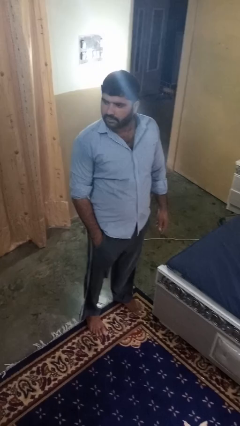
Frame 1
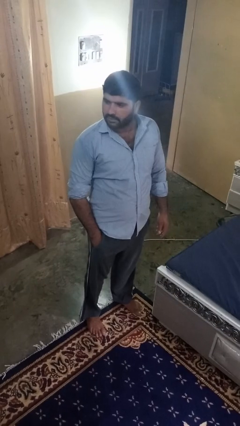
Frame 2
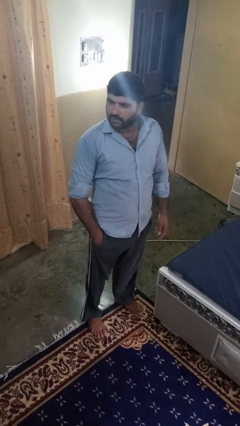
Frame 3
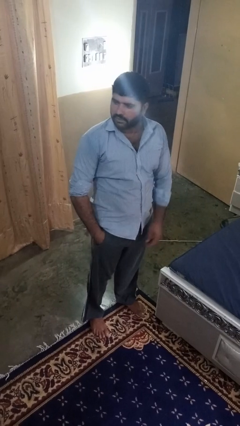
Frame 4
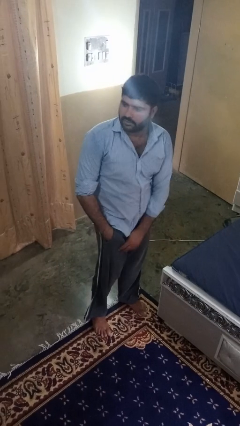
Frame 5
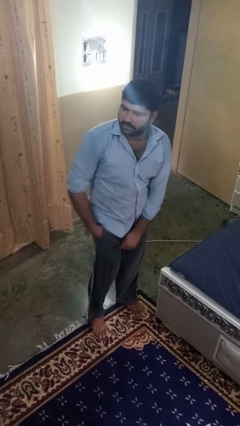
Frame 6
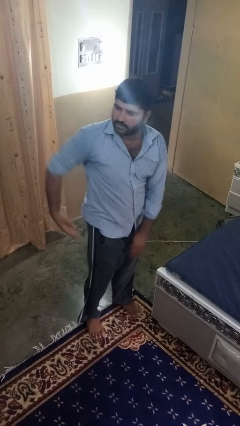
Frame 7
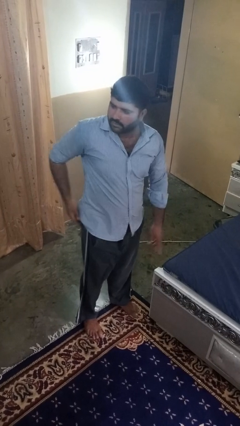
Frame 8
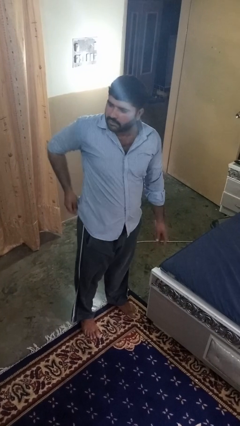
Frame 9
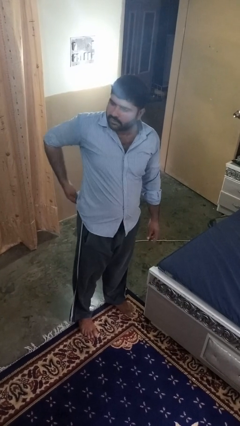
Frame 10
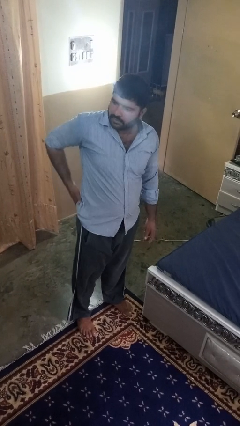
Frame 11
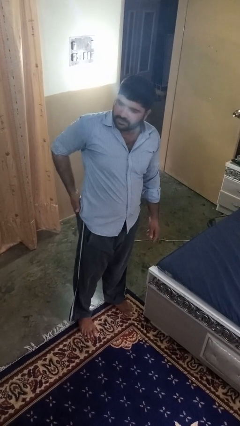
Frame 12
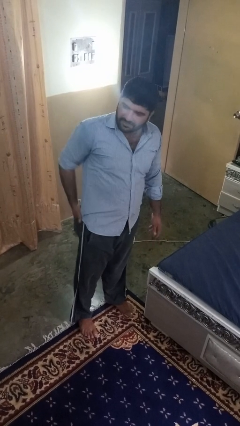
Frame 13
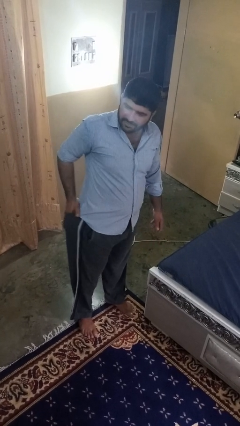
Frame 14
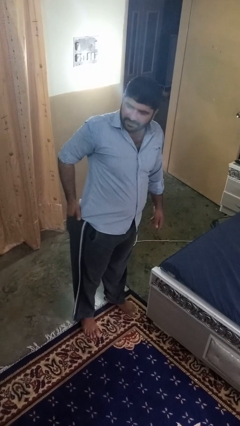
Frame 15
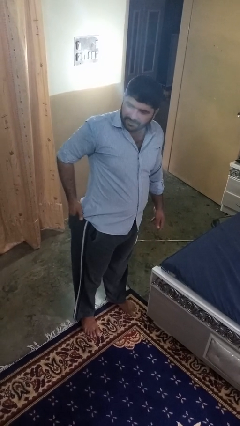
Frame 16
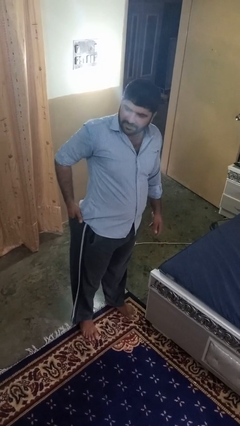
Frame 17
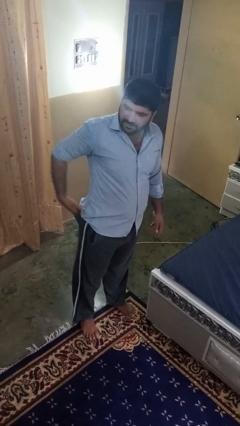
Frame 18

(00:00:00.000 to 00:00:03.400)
person puts hands in back pockets

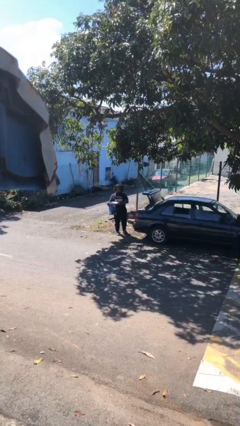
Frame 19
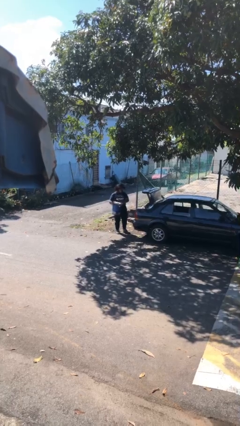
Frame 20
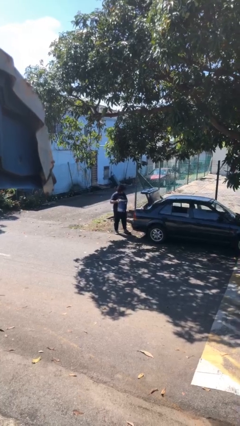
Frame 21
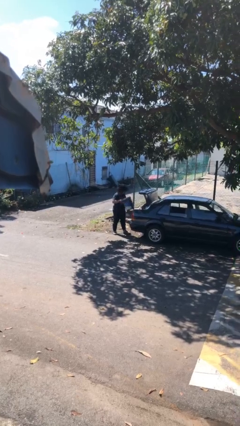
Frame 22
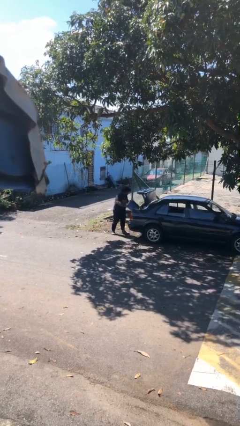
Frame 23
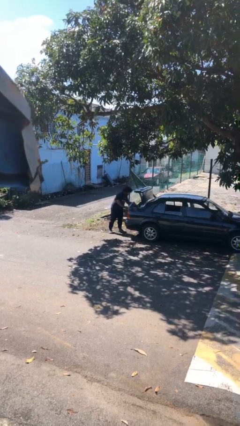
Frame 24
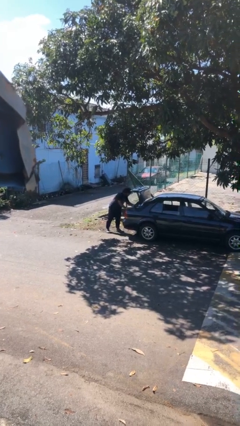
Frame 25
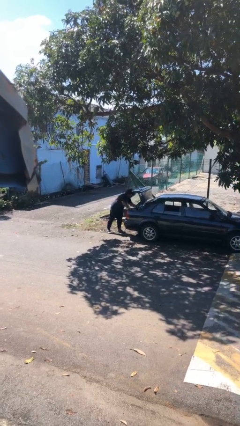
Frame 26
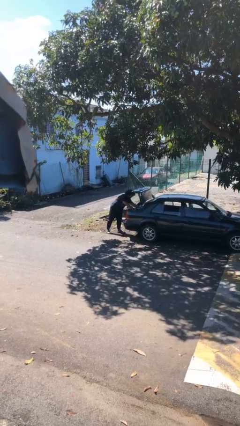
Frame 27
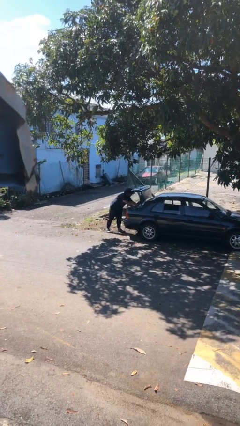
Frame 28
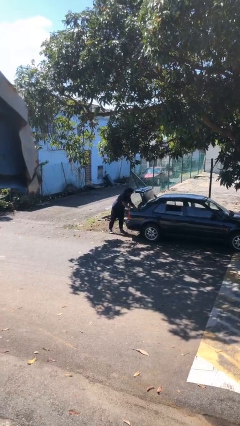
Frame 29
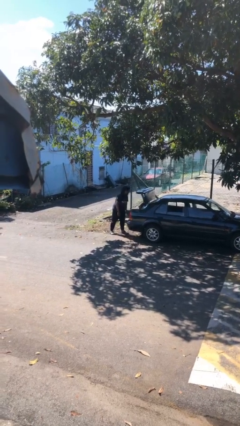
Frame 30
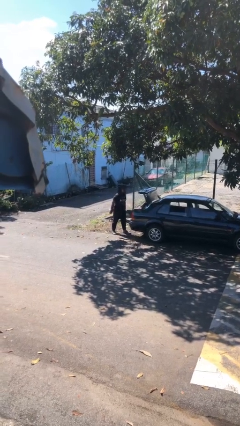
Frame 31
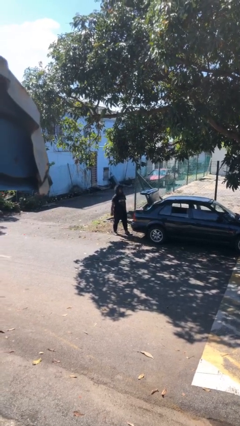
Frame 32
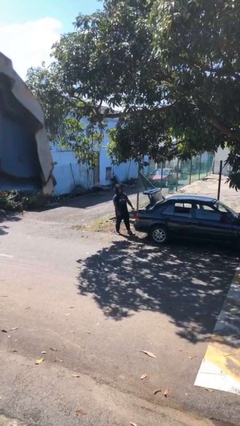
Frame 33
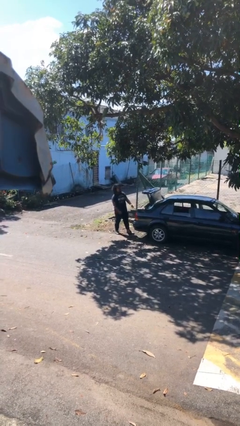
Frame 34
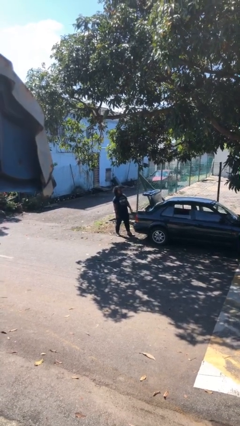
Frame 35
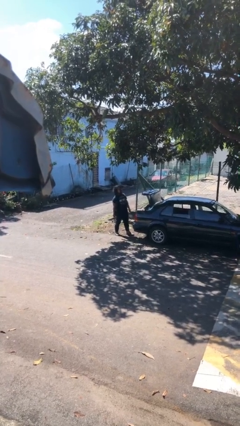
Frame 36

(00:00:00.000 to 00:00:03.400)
person loads car

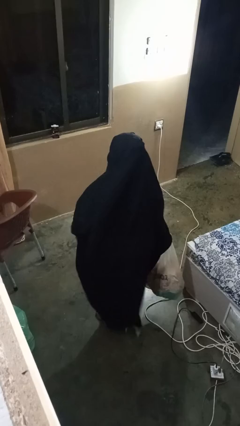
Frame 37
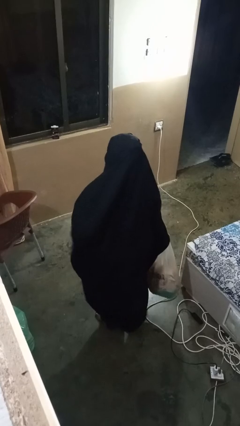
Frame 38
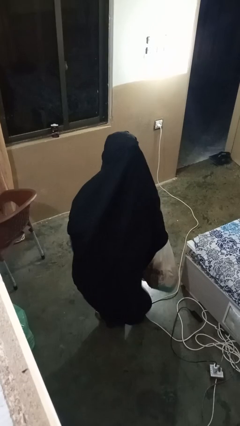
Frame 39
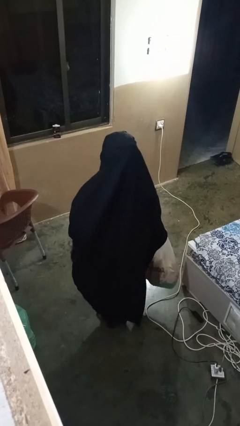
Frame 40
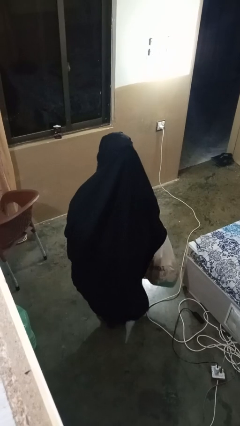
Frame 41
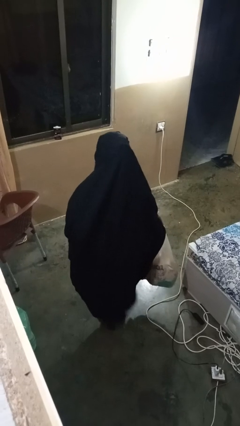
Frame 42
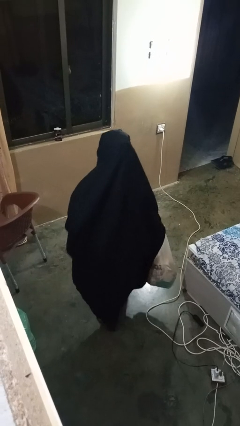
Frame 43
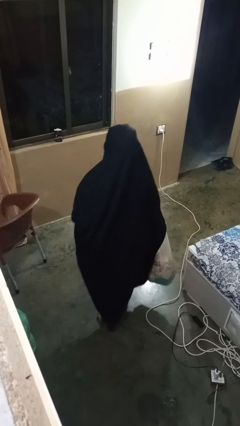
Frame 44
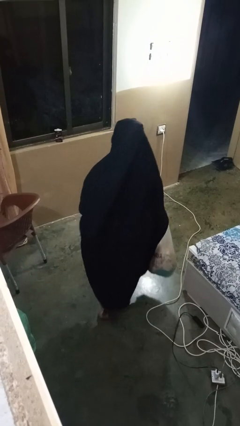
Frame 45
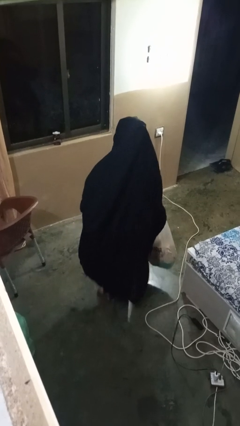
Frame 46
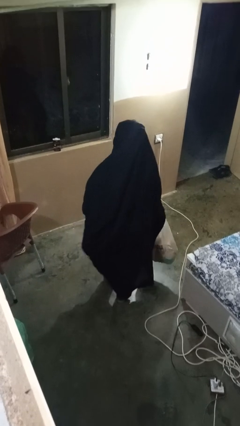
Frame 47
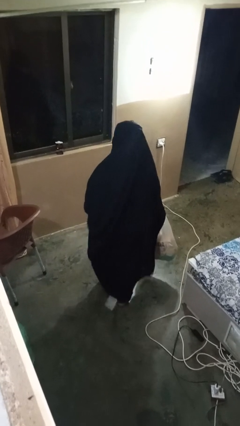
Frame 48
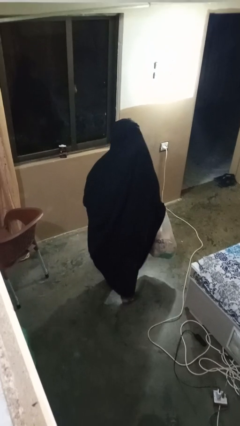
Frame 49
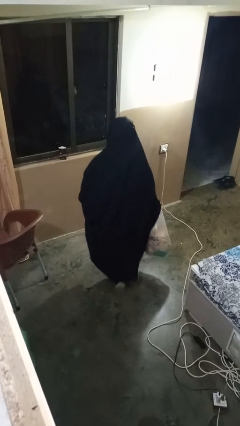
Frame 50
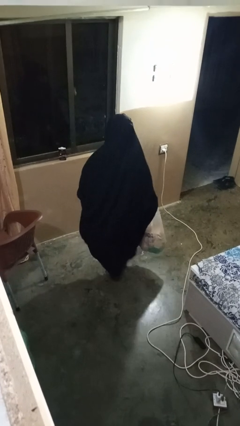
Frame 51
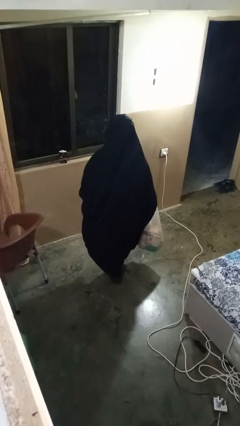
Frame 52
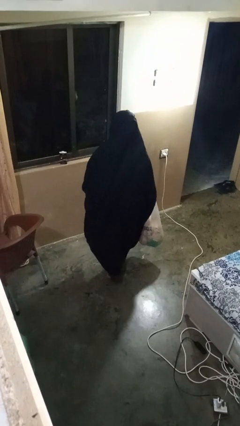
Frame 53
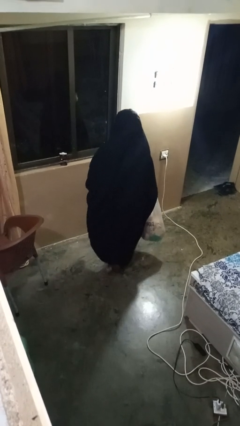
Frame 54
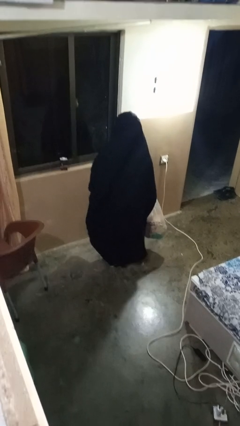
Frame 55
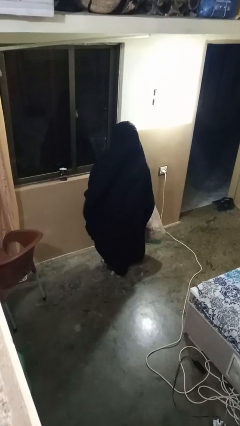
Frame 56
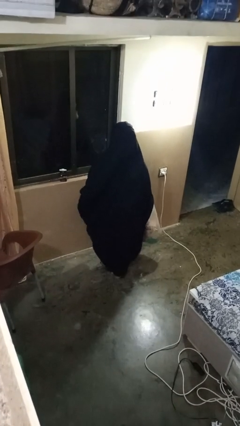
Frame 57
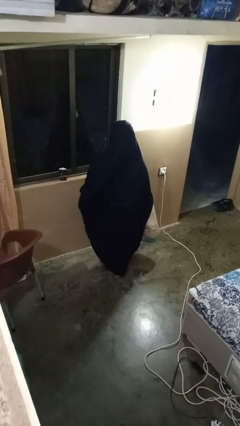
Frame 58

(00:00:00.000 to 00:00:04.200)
person carries groceries

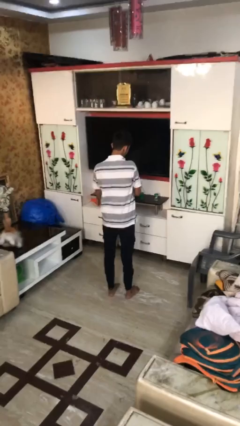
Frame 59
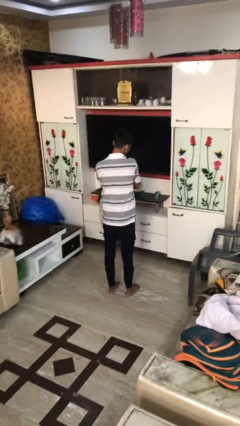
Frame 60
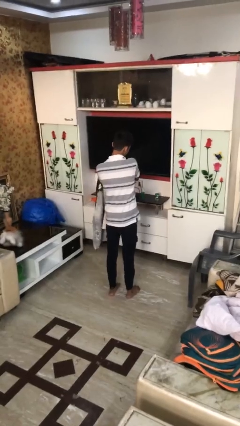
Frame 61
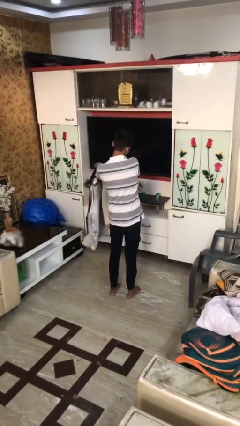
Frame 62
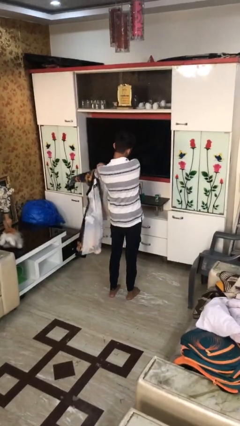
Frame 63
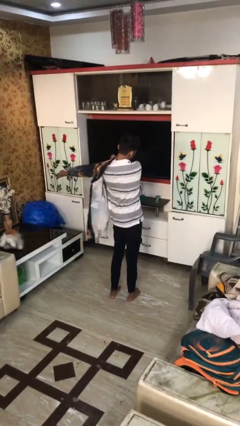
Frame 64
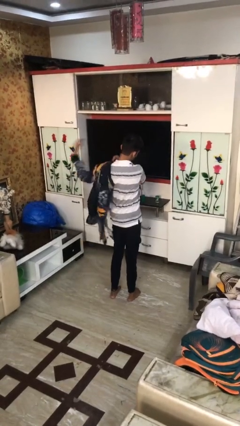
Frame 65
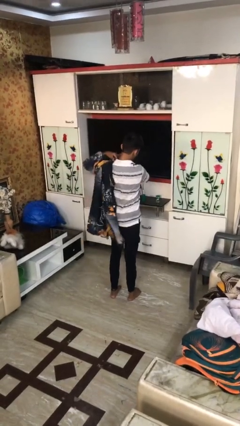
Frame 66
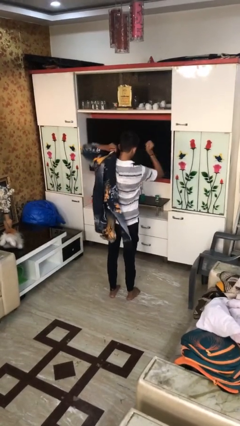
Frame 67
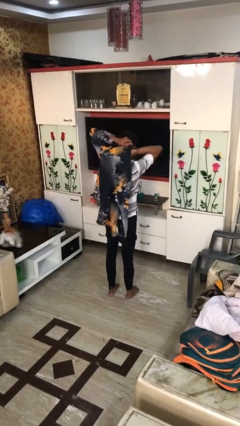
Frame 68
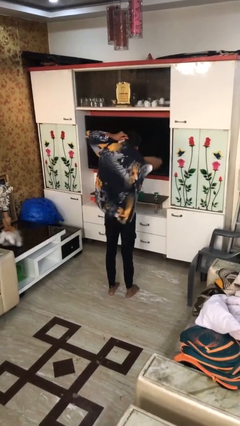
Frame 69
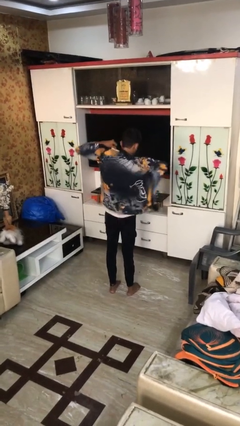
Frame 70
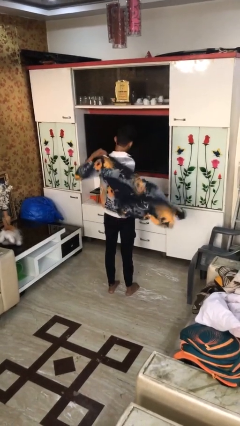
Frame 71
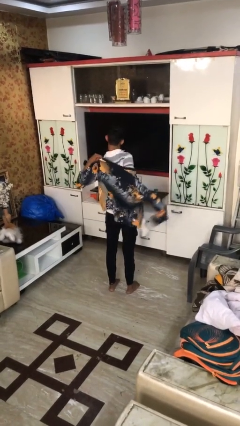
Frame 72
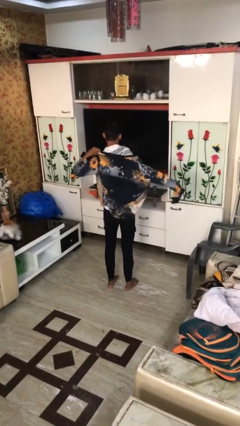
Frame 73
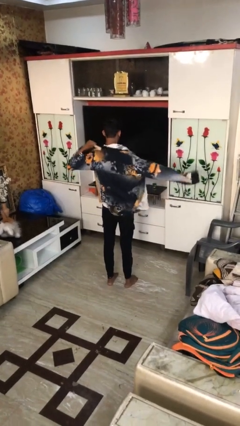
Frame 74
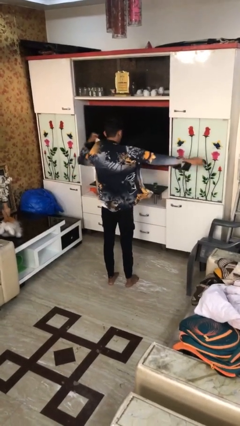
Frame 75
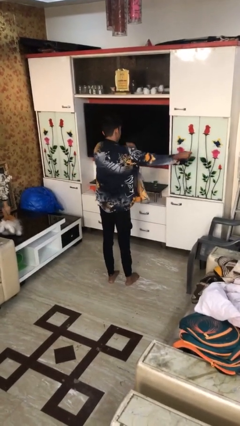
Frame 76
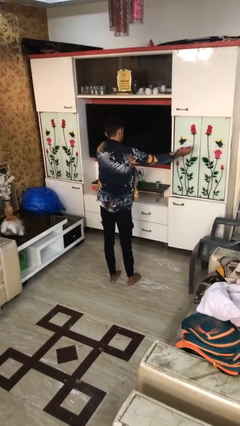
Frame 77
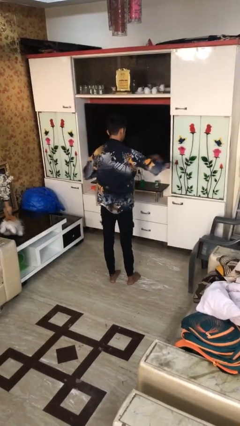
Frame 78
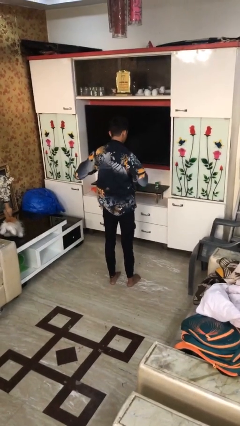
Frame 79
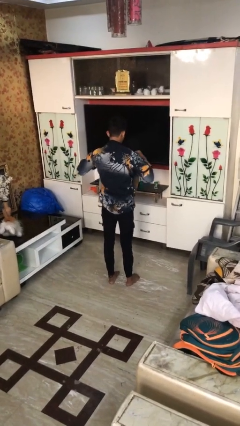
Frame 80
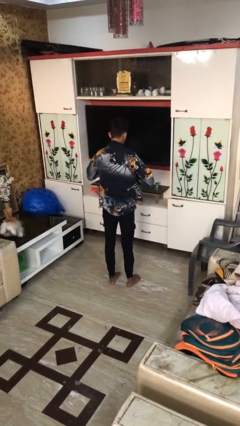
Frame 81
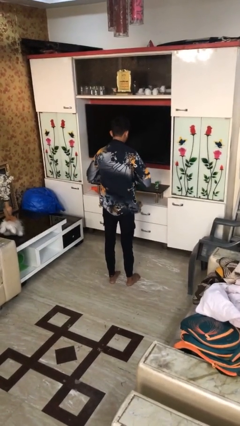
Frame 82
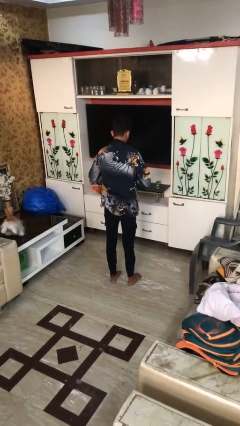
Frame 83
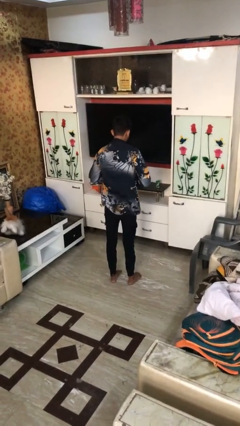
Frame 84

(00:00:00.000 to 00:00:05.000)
person puts on shirt

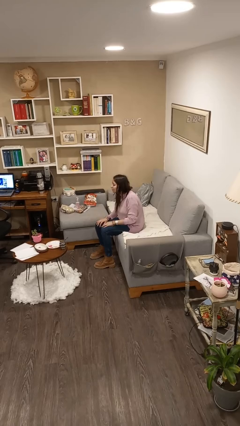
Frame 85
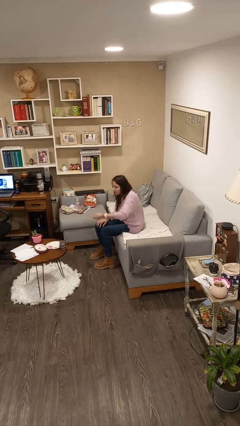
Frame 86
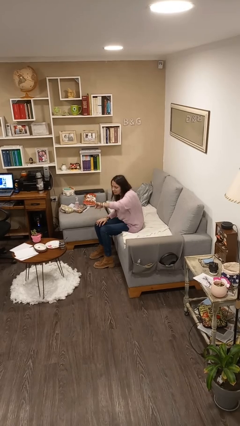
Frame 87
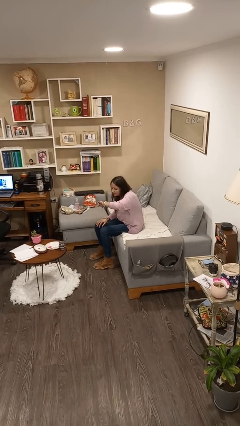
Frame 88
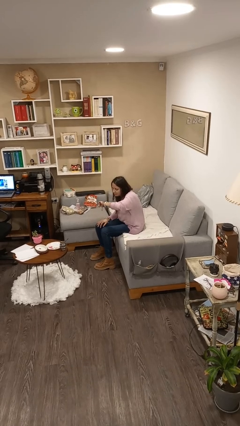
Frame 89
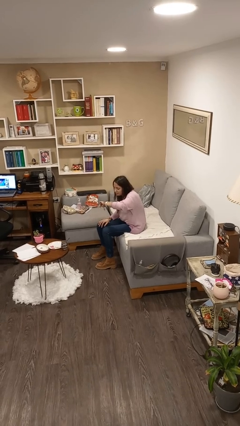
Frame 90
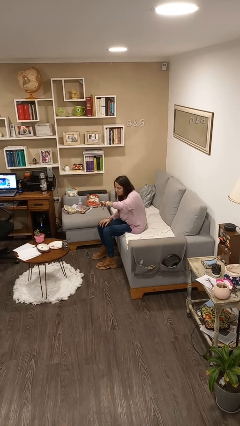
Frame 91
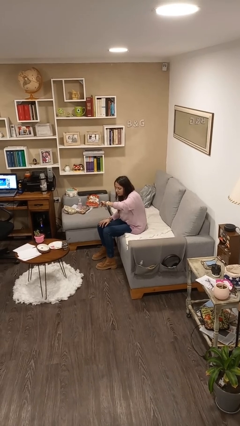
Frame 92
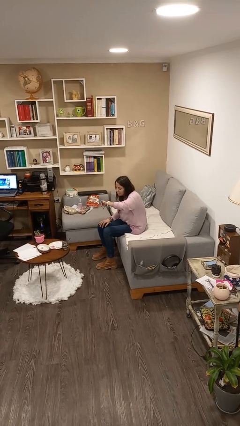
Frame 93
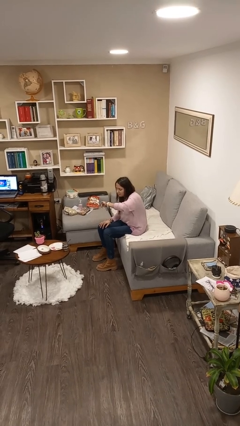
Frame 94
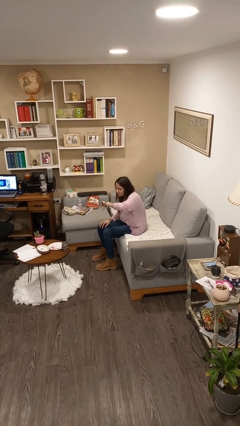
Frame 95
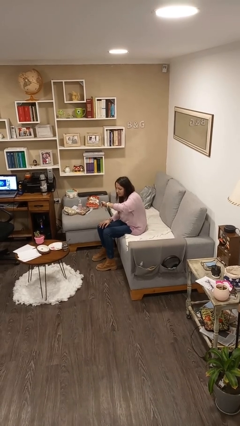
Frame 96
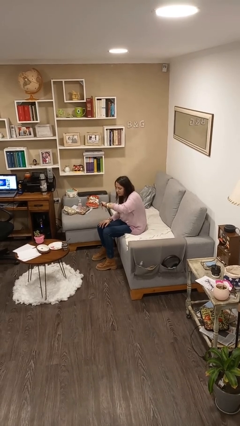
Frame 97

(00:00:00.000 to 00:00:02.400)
person looks at wristwatch
